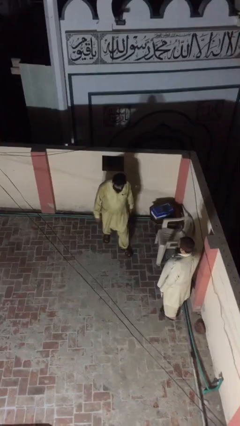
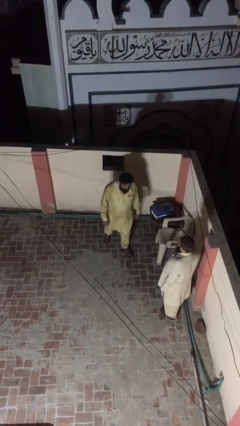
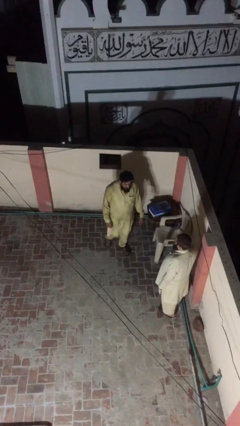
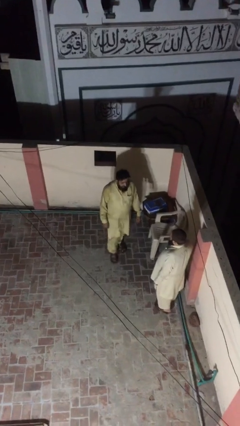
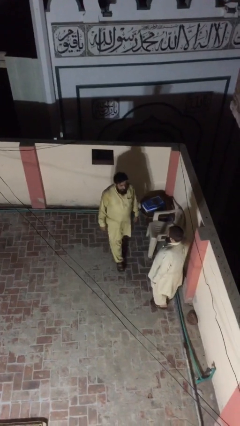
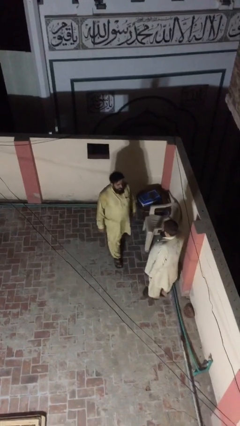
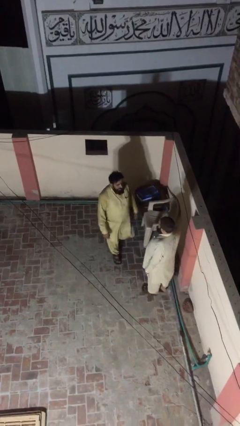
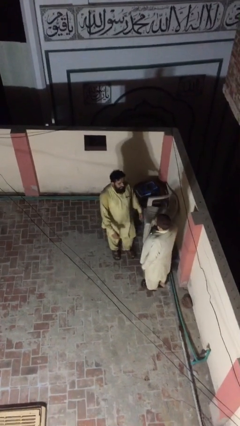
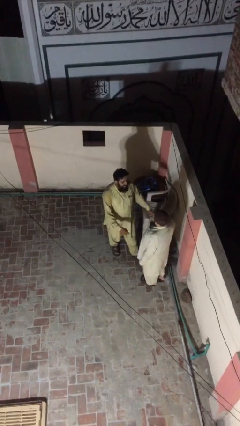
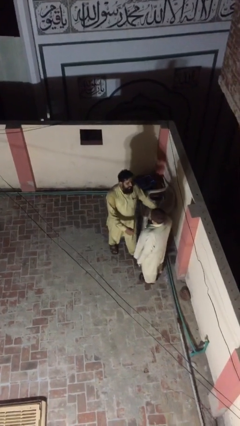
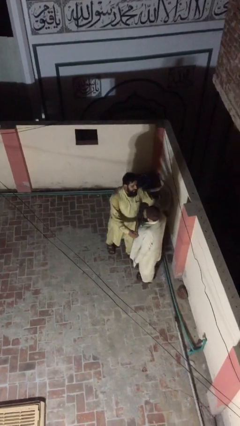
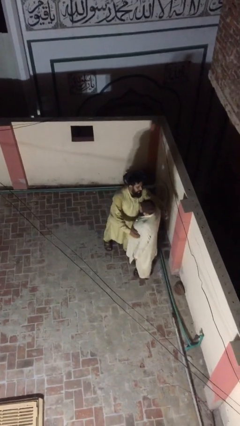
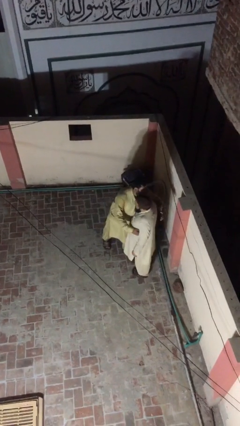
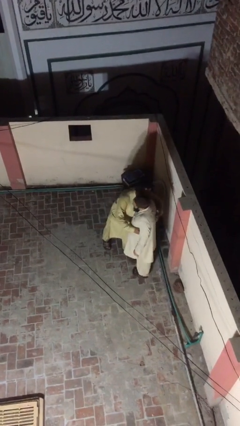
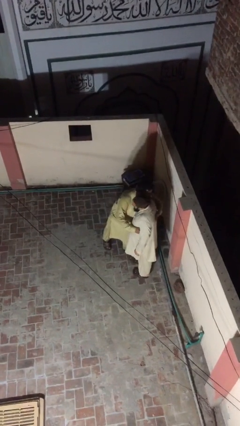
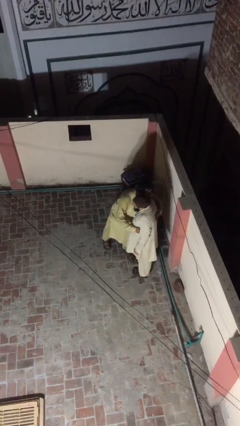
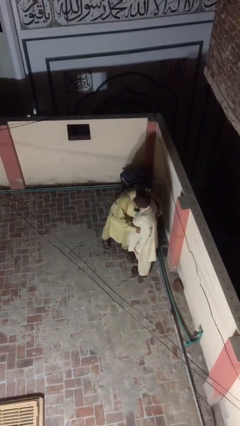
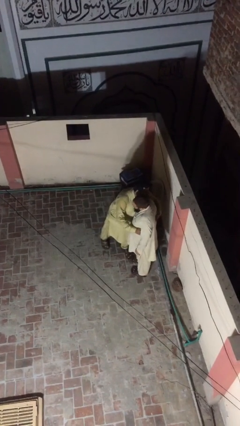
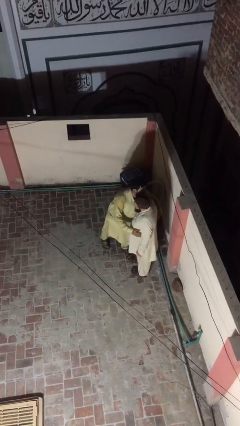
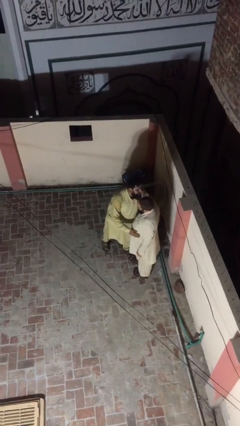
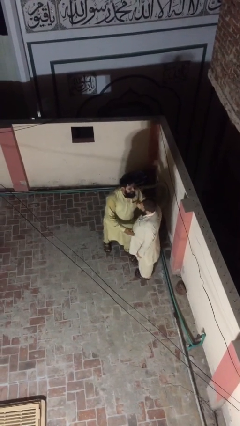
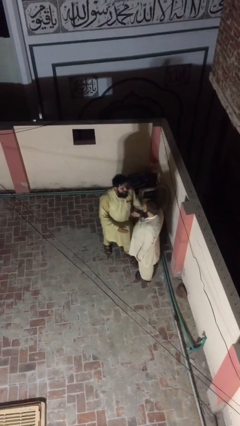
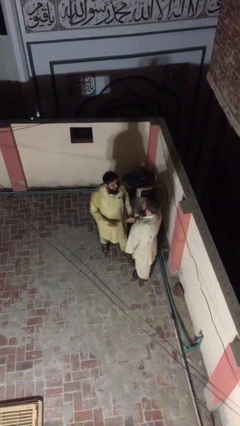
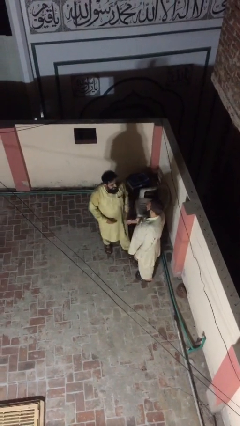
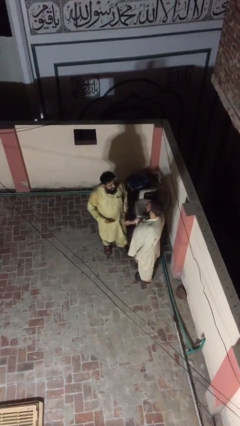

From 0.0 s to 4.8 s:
person embraces person

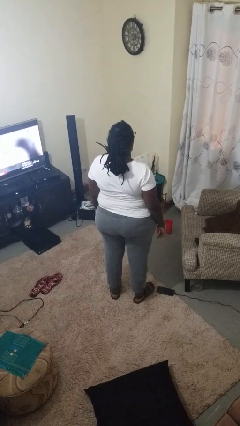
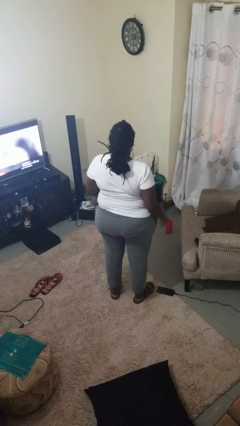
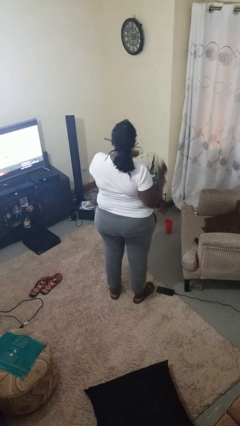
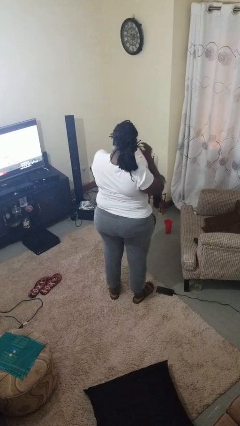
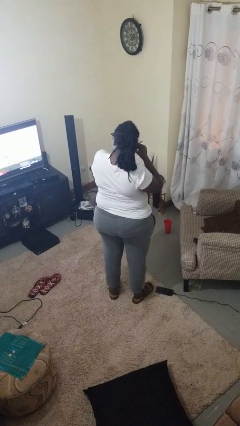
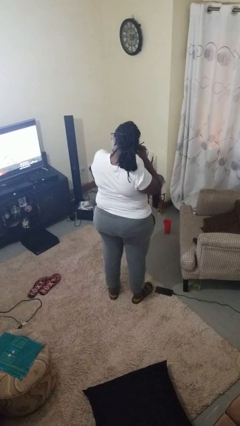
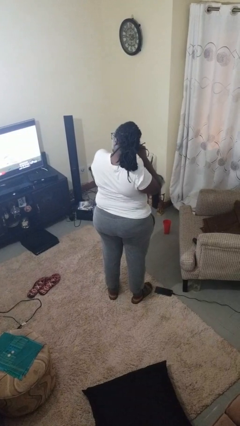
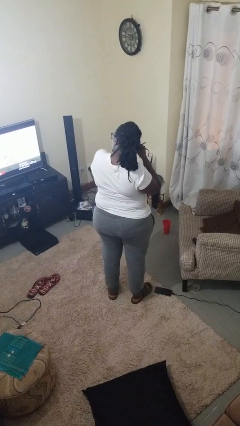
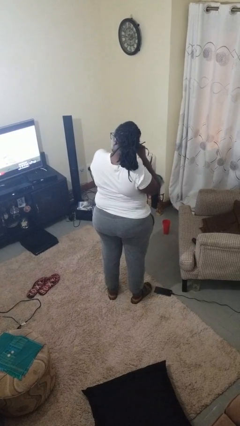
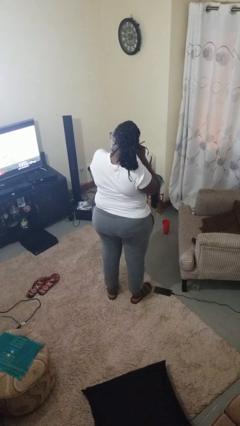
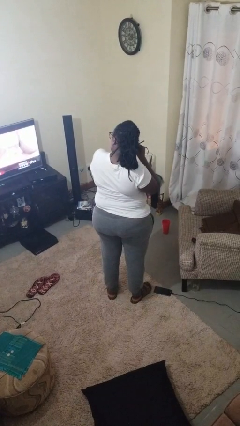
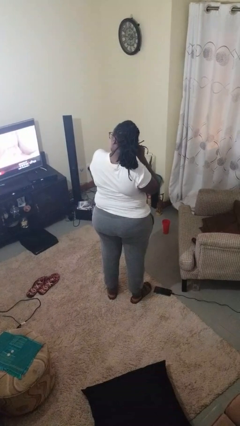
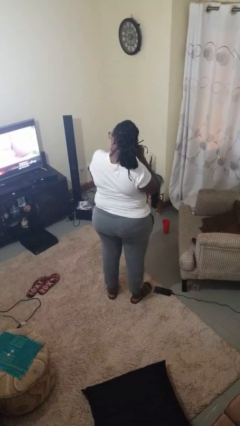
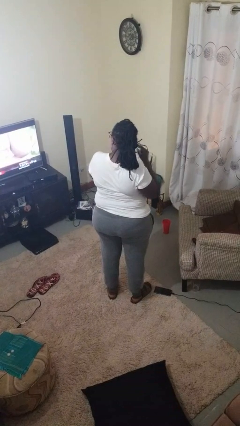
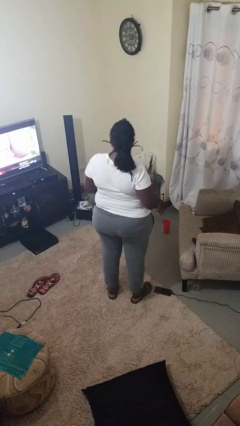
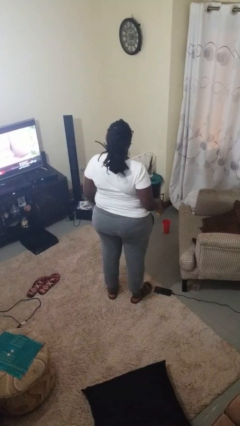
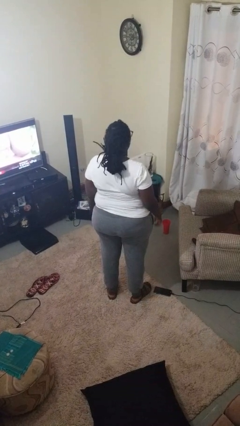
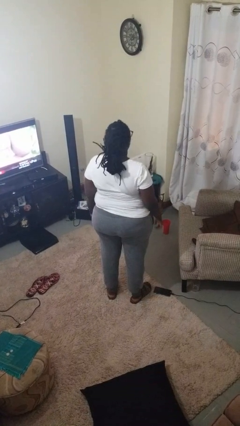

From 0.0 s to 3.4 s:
person takes off earrings

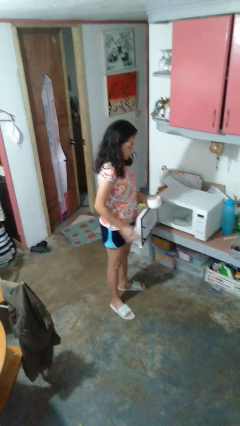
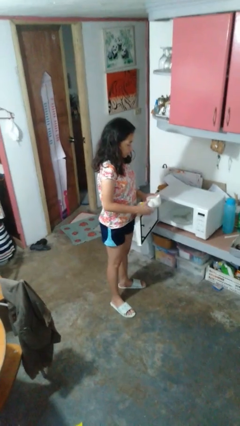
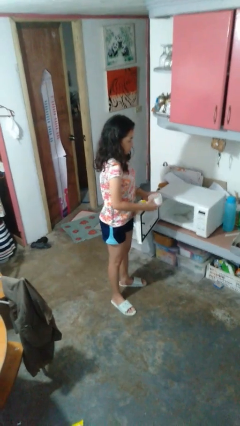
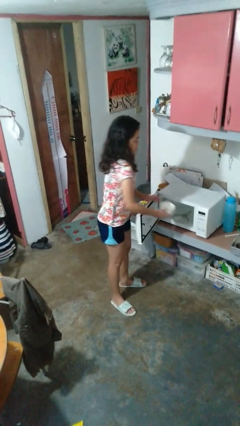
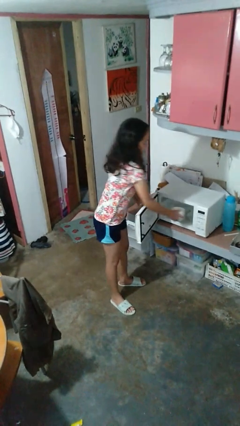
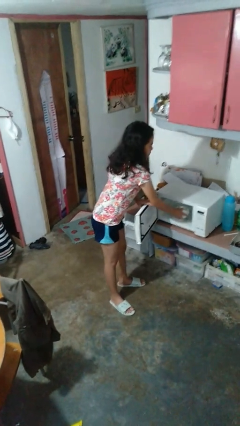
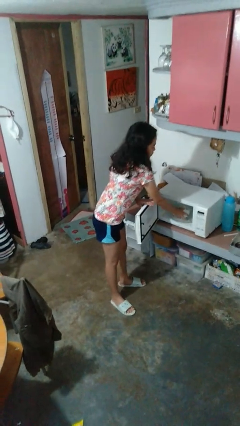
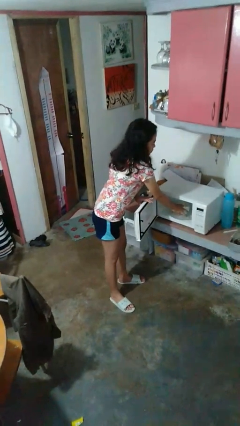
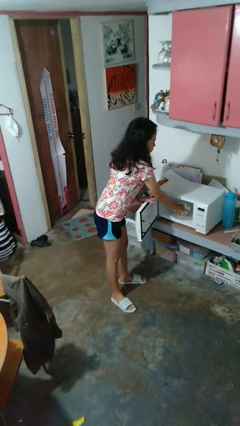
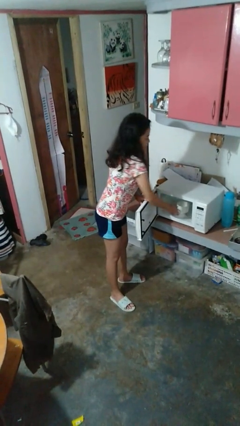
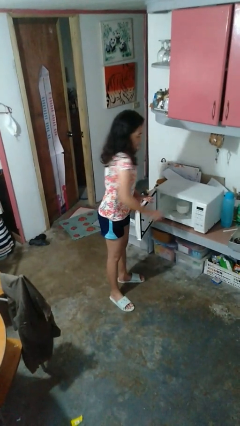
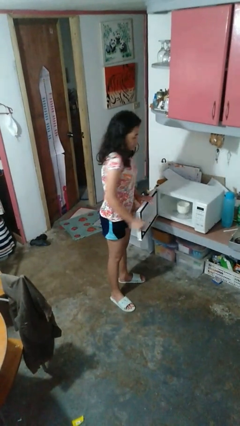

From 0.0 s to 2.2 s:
person puts object into microwave

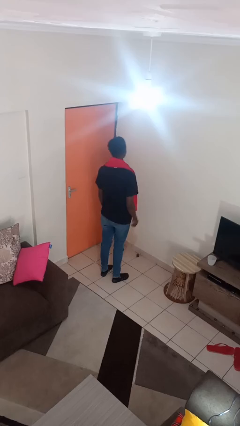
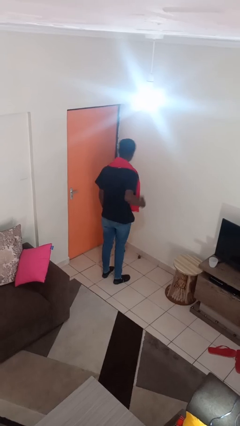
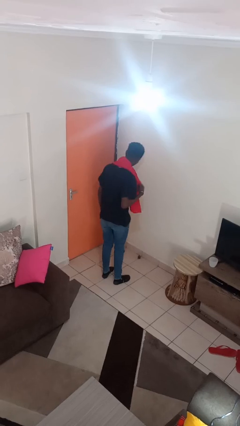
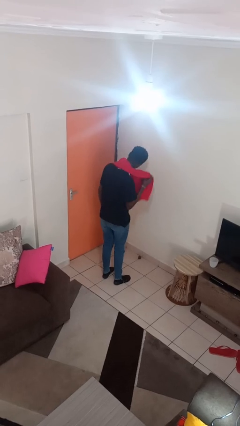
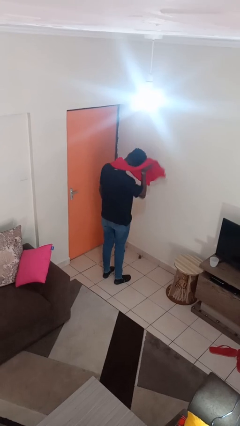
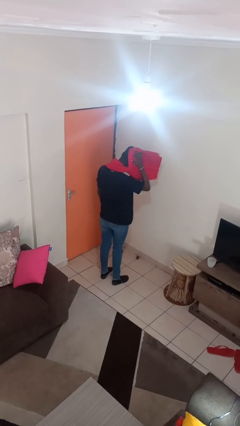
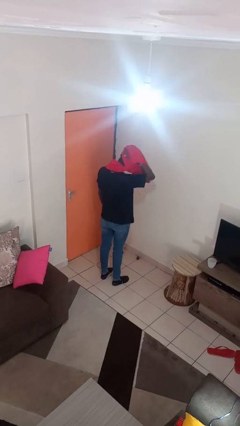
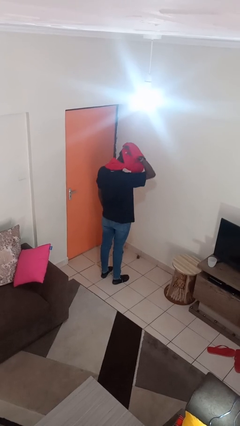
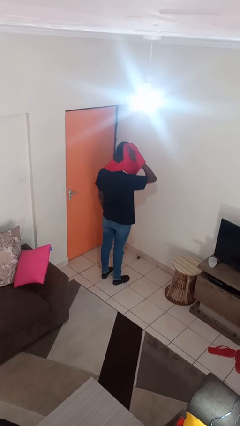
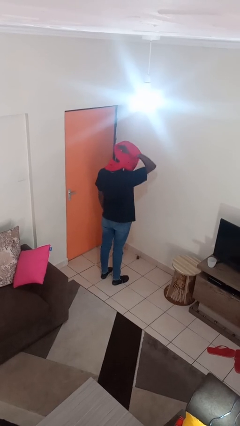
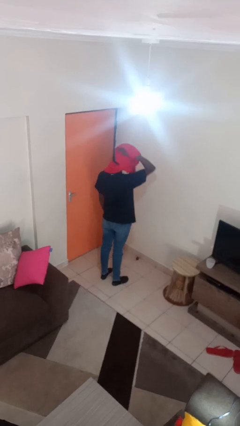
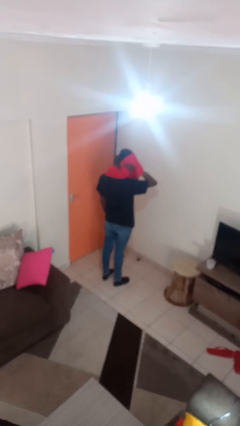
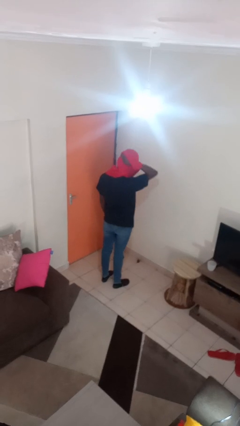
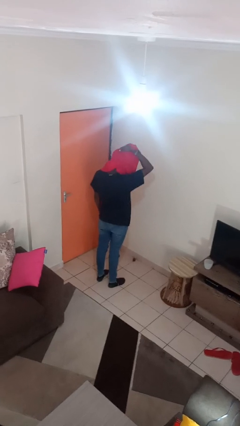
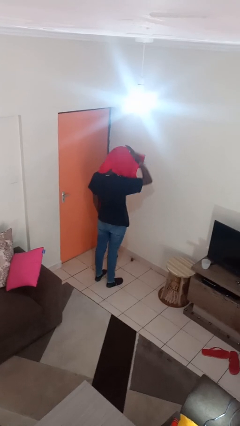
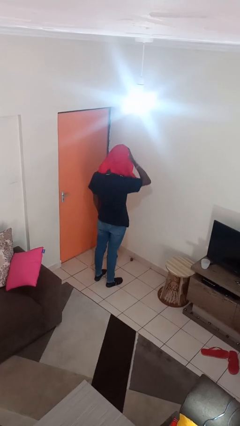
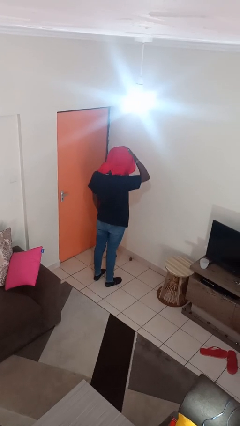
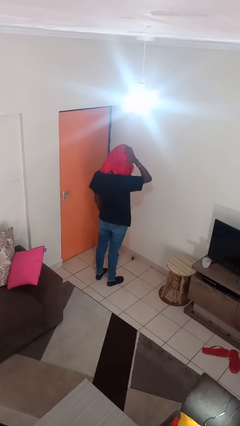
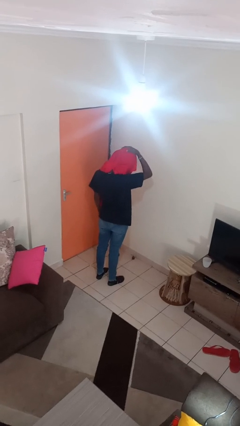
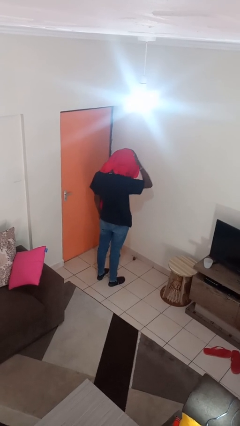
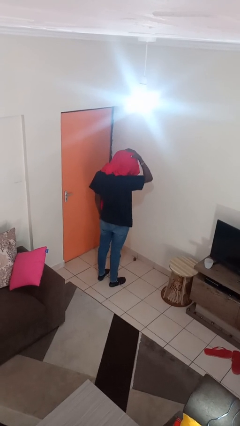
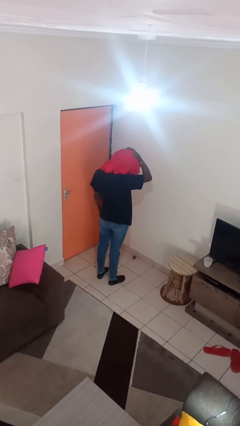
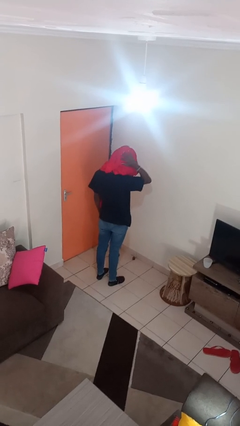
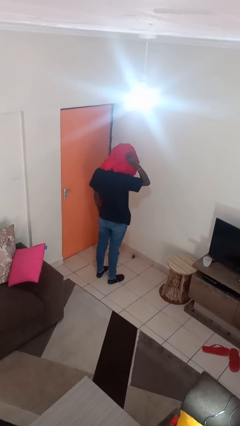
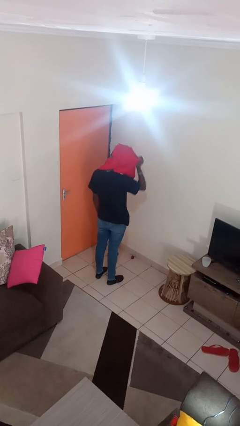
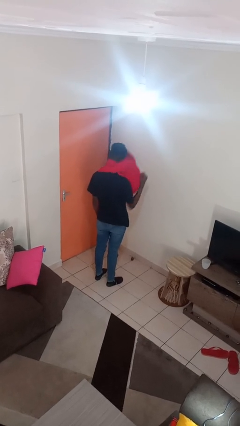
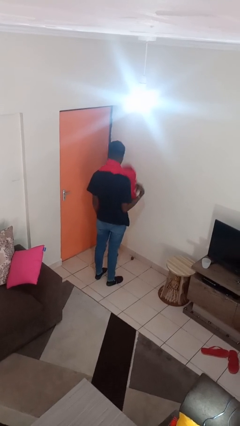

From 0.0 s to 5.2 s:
person dries hair with towel

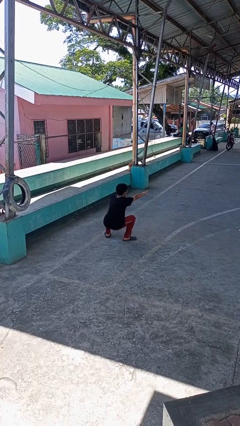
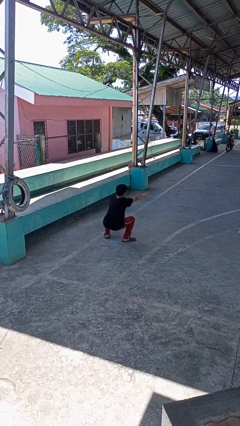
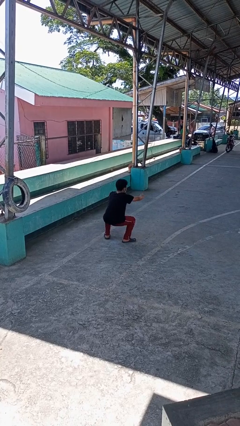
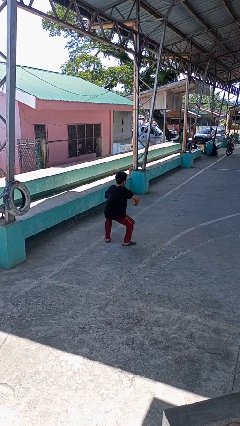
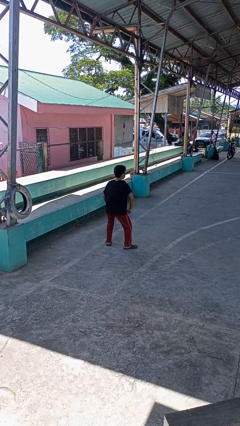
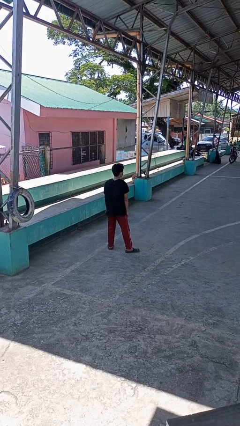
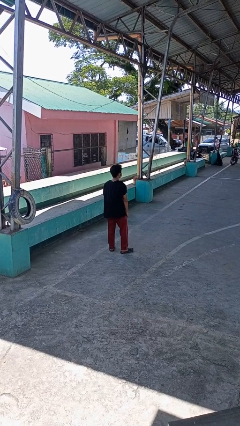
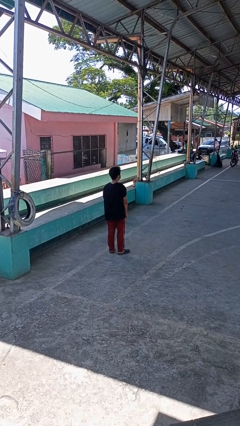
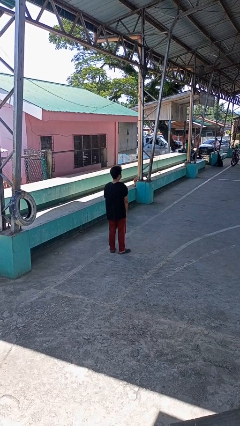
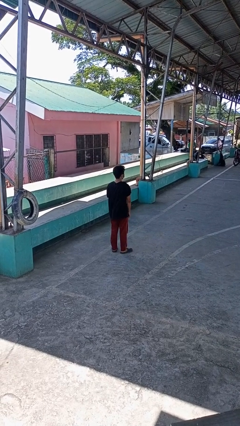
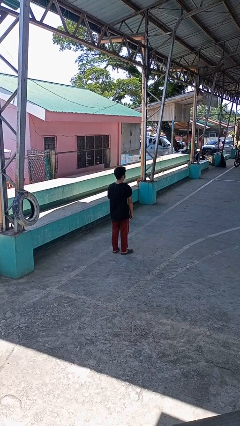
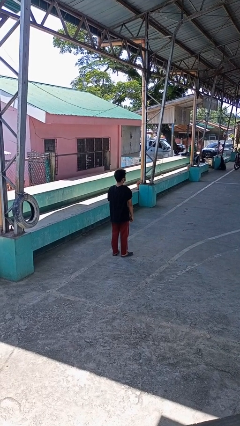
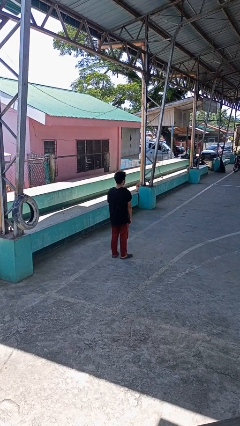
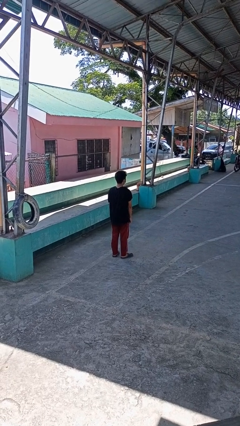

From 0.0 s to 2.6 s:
person stands up
